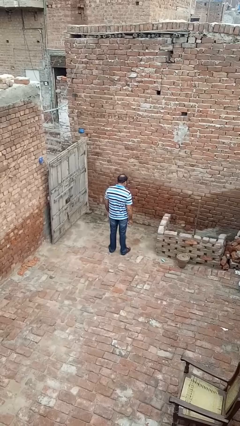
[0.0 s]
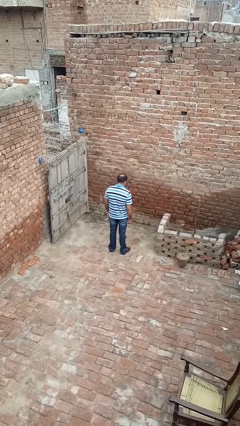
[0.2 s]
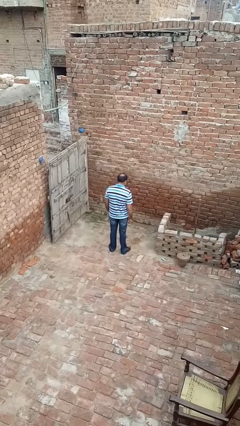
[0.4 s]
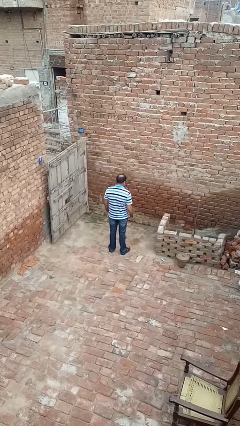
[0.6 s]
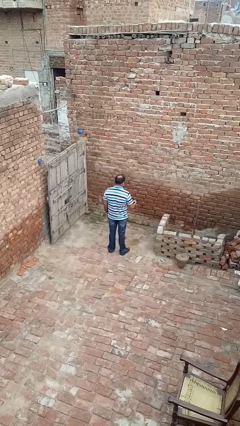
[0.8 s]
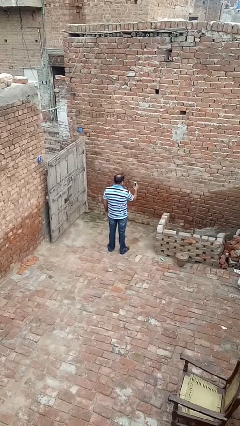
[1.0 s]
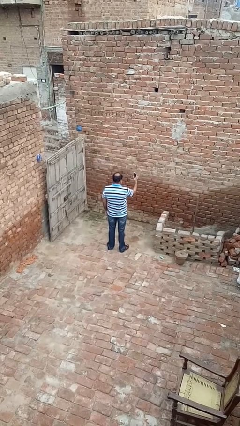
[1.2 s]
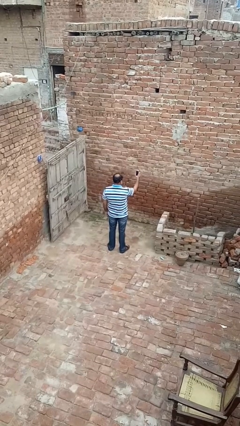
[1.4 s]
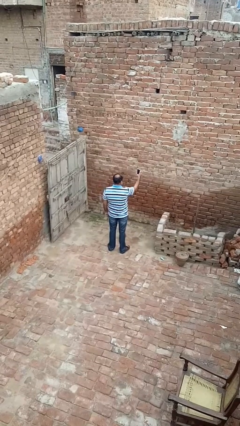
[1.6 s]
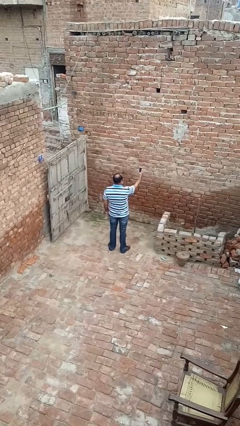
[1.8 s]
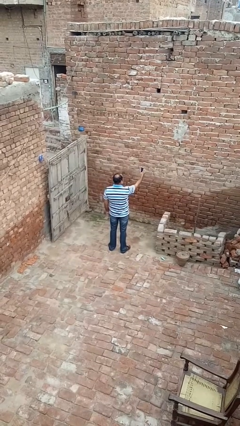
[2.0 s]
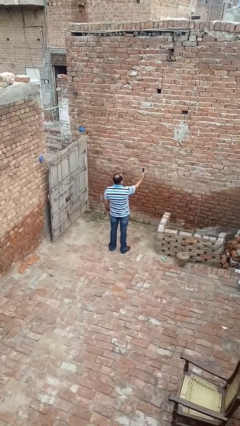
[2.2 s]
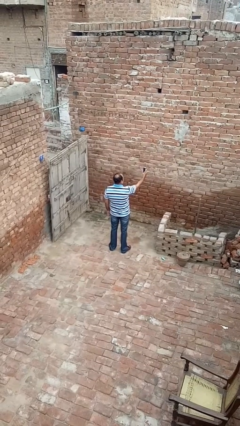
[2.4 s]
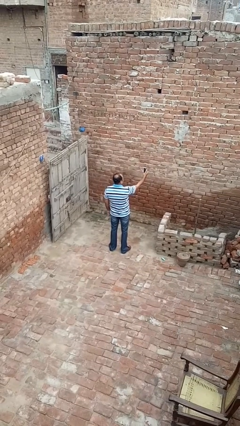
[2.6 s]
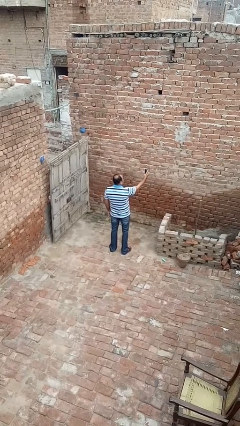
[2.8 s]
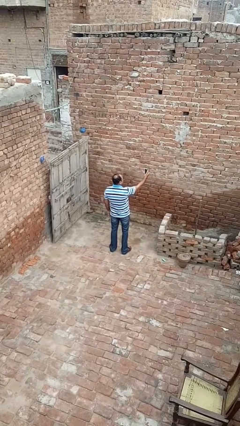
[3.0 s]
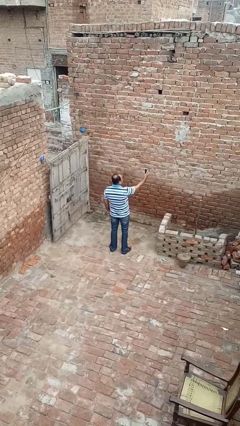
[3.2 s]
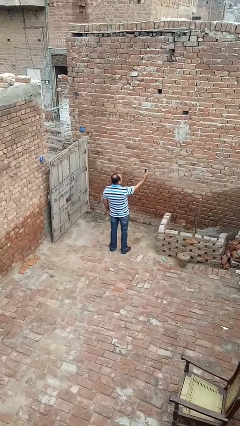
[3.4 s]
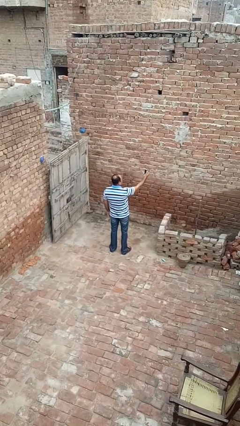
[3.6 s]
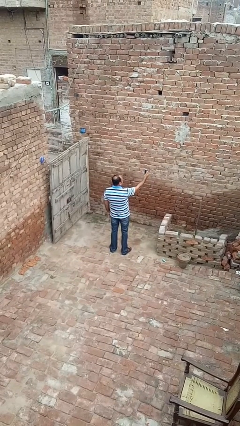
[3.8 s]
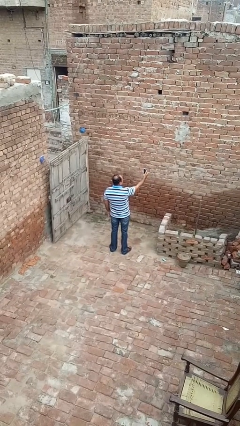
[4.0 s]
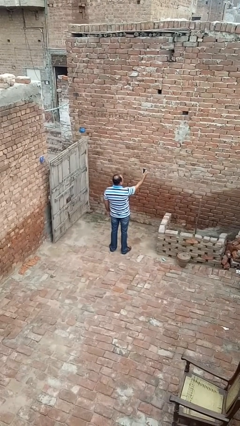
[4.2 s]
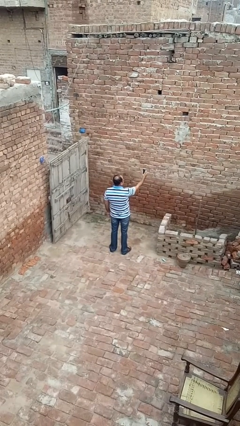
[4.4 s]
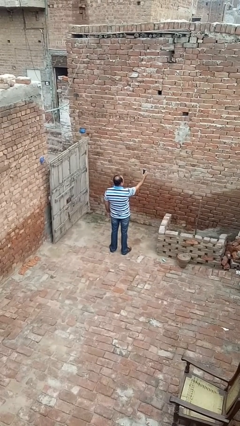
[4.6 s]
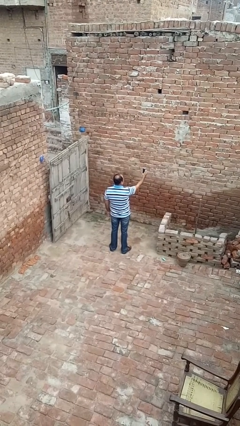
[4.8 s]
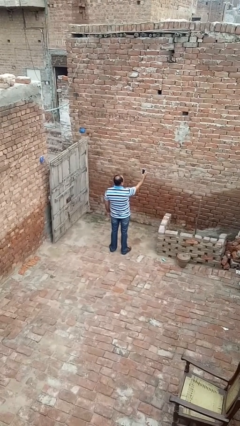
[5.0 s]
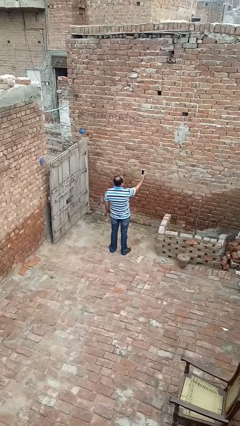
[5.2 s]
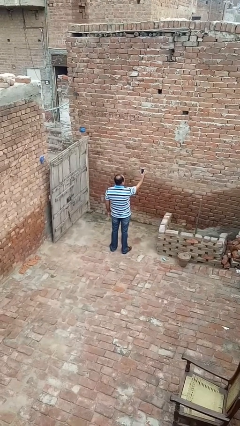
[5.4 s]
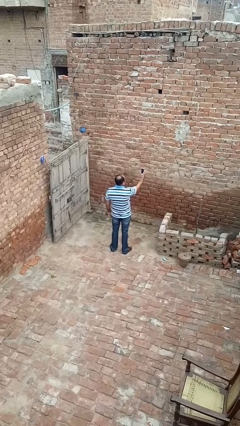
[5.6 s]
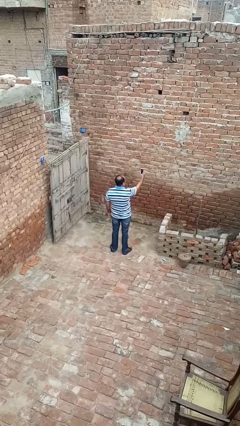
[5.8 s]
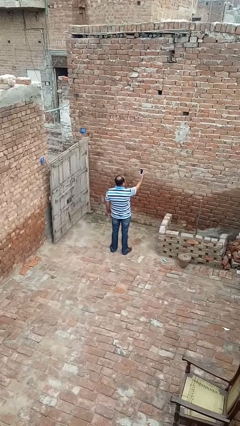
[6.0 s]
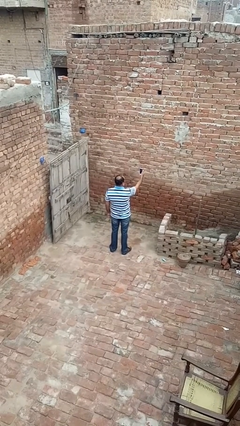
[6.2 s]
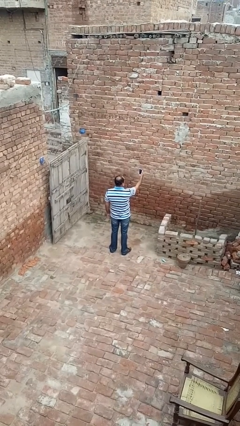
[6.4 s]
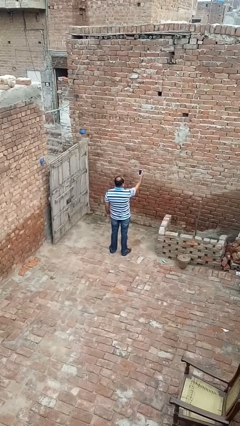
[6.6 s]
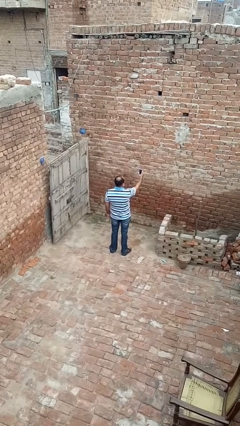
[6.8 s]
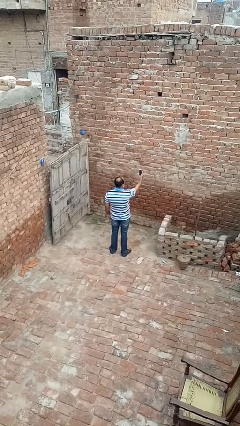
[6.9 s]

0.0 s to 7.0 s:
person takes selfie

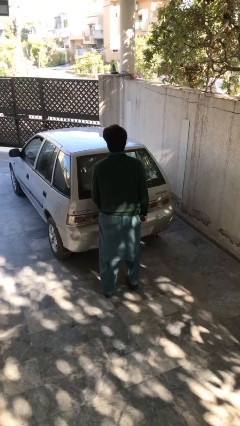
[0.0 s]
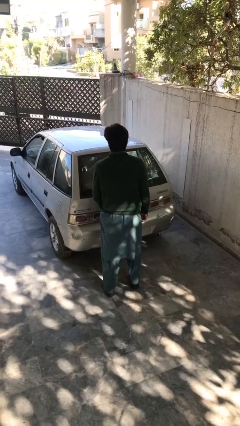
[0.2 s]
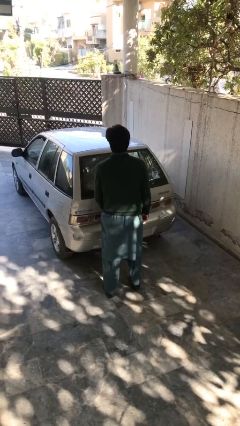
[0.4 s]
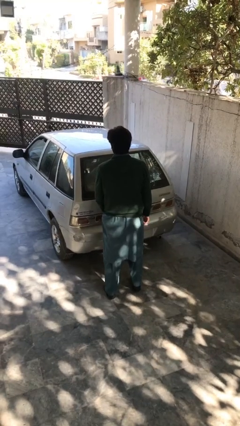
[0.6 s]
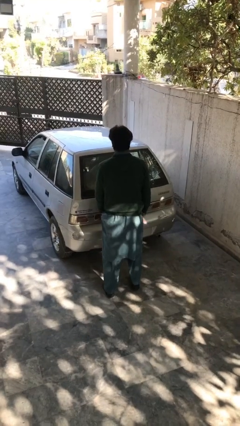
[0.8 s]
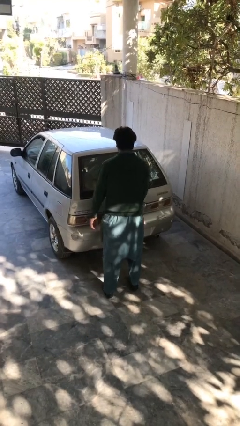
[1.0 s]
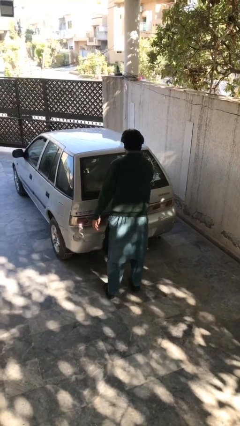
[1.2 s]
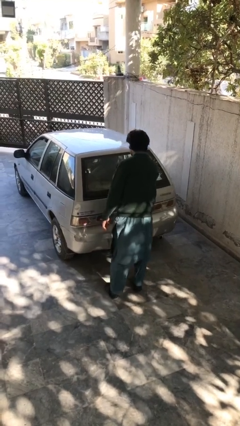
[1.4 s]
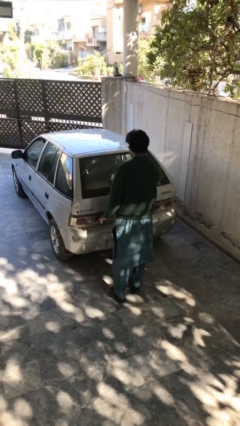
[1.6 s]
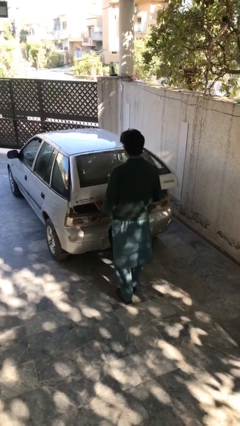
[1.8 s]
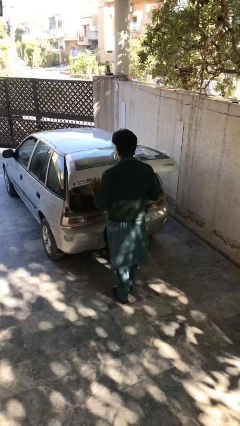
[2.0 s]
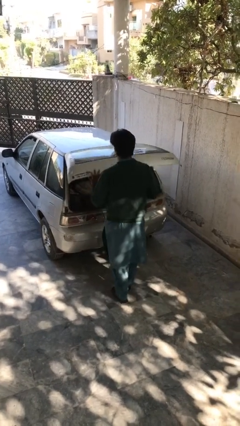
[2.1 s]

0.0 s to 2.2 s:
person opens car trunk

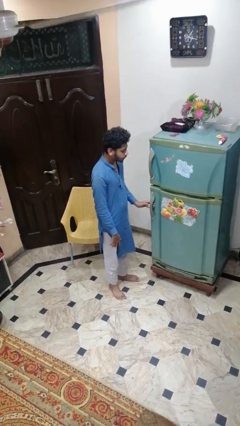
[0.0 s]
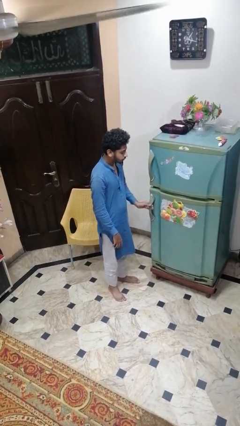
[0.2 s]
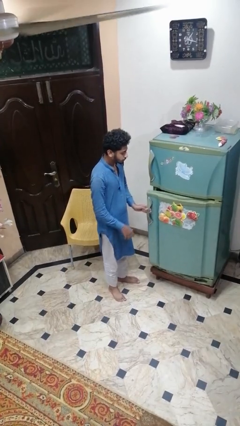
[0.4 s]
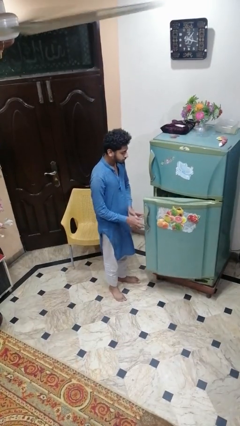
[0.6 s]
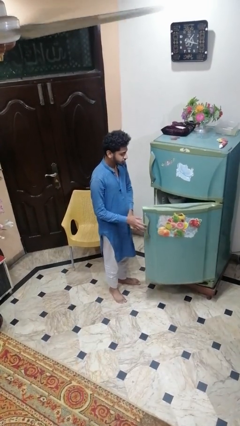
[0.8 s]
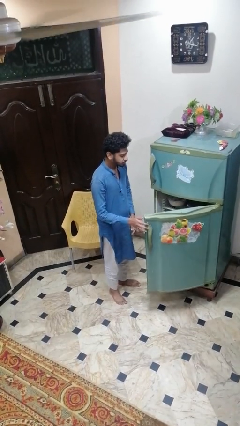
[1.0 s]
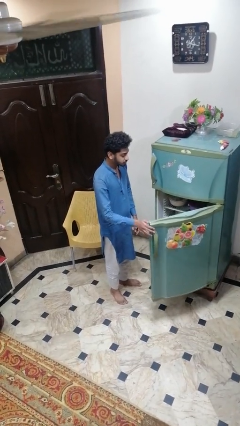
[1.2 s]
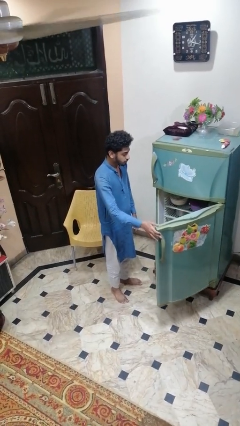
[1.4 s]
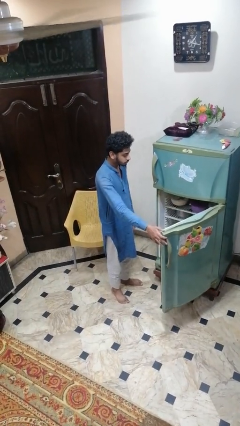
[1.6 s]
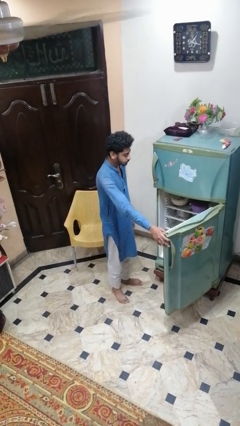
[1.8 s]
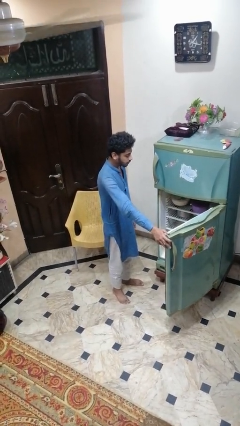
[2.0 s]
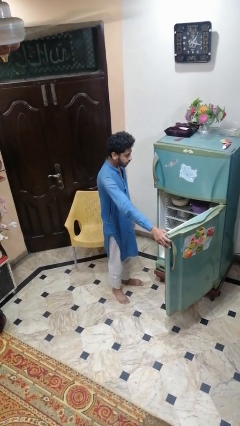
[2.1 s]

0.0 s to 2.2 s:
person opens refrigerator

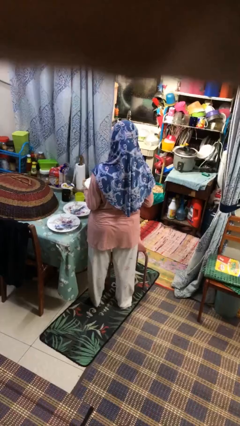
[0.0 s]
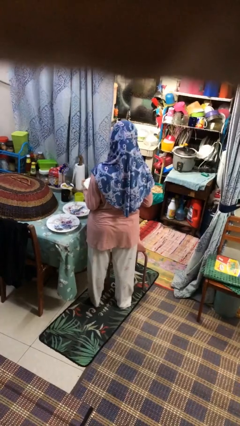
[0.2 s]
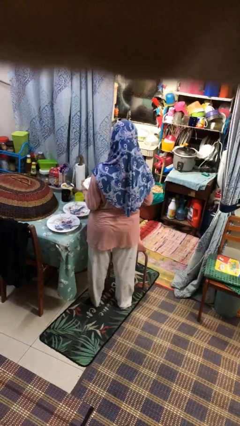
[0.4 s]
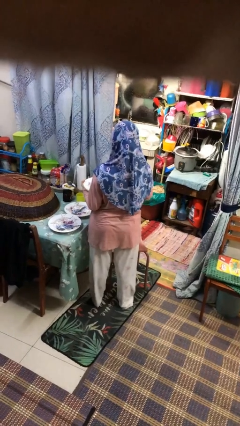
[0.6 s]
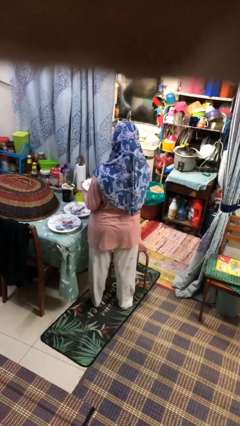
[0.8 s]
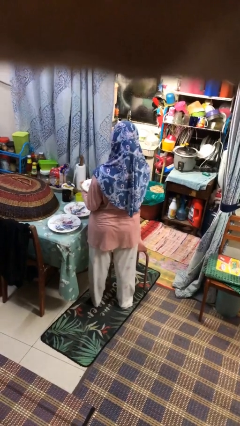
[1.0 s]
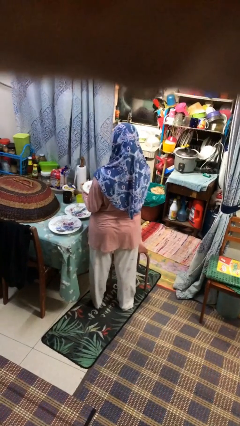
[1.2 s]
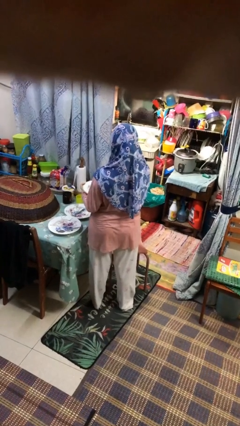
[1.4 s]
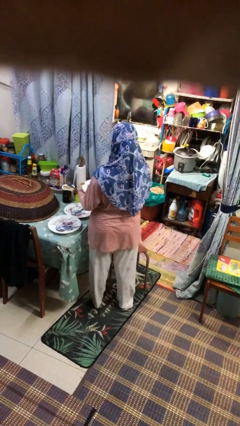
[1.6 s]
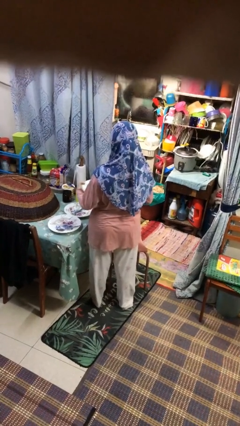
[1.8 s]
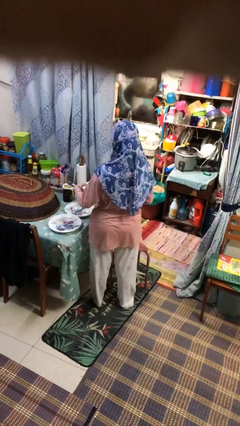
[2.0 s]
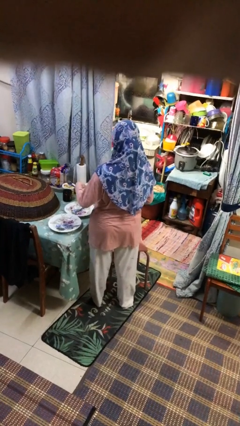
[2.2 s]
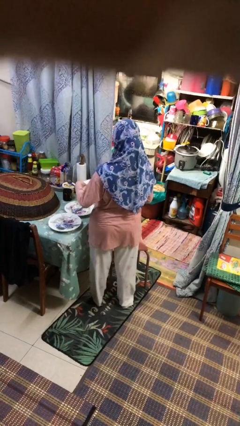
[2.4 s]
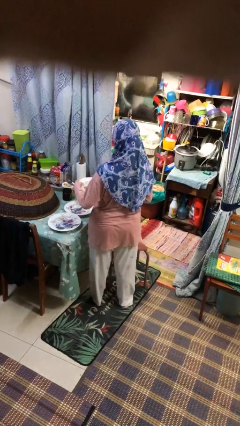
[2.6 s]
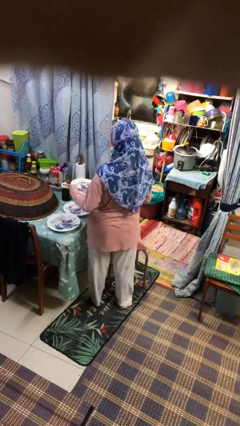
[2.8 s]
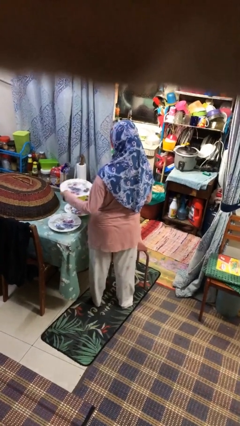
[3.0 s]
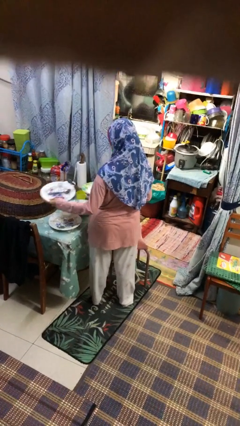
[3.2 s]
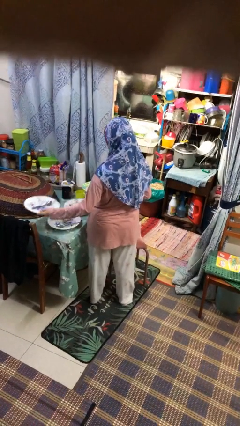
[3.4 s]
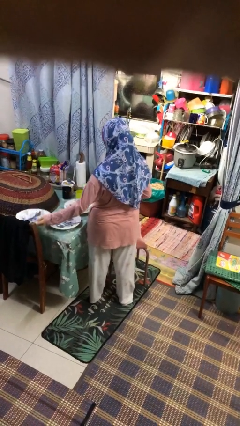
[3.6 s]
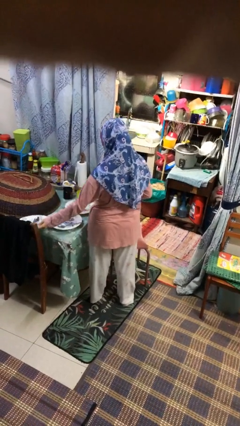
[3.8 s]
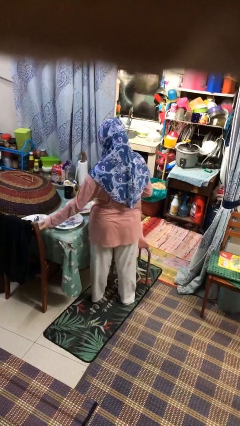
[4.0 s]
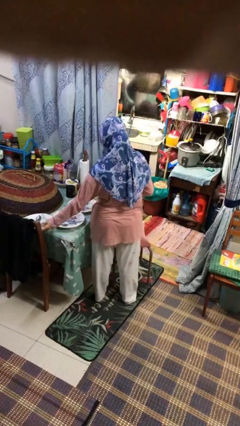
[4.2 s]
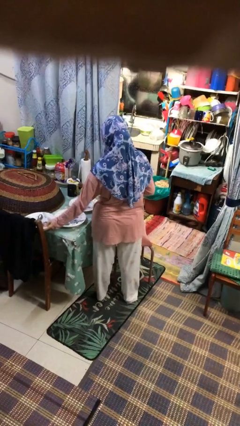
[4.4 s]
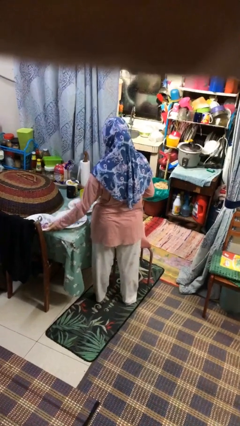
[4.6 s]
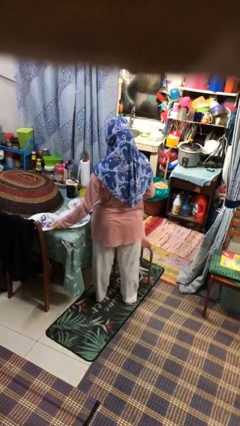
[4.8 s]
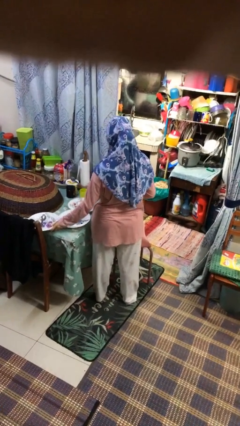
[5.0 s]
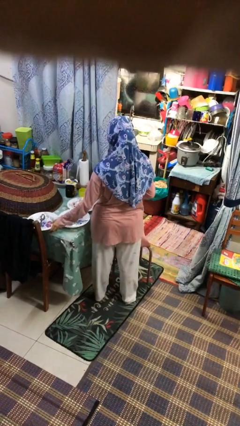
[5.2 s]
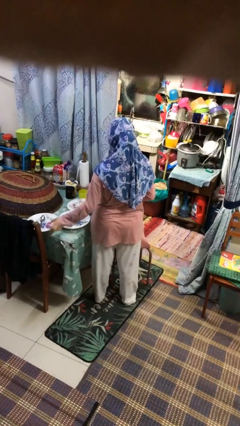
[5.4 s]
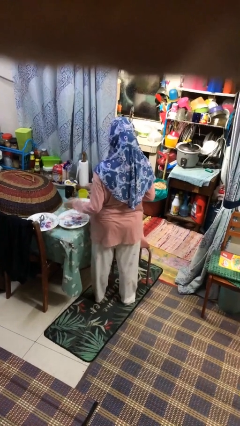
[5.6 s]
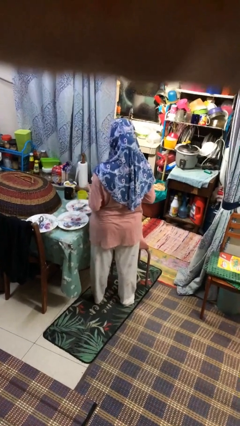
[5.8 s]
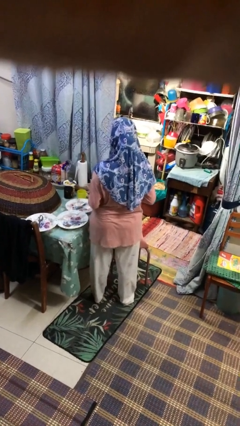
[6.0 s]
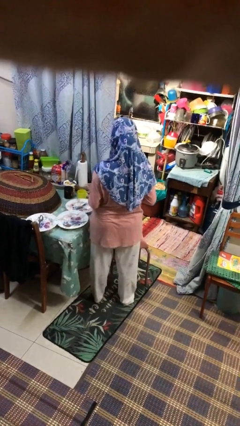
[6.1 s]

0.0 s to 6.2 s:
person sets table
